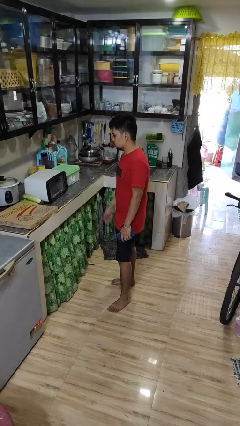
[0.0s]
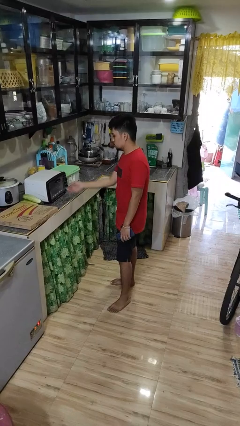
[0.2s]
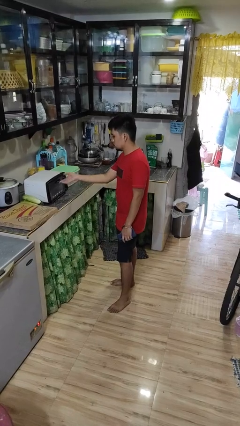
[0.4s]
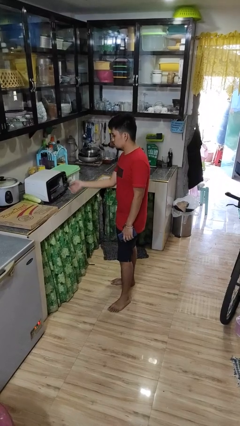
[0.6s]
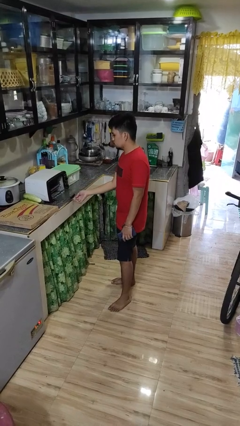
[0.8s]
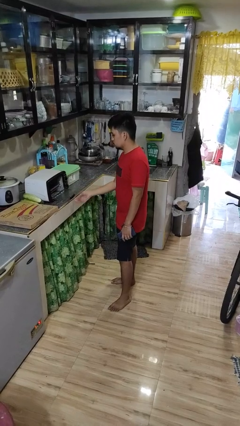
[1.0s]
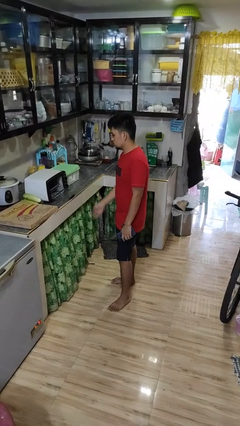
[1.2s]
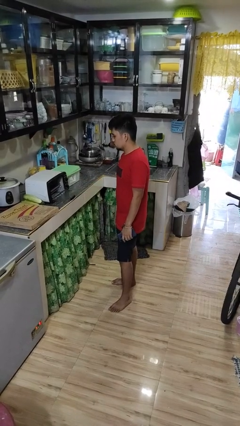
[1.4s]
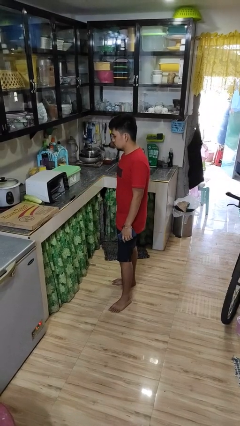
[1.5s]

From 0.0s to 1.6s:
person opens microwave

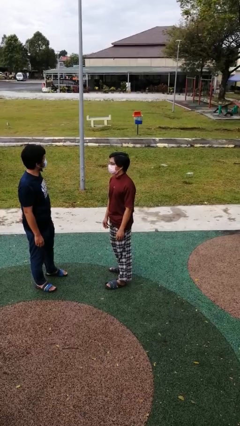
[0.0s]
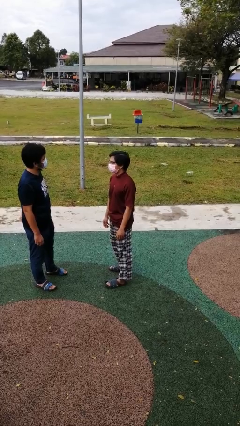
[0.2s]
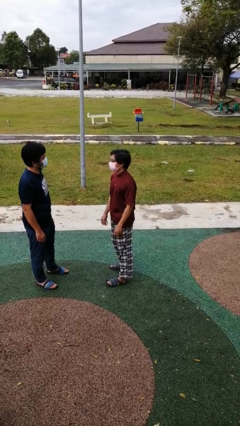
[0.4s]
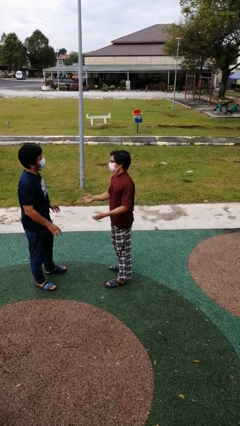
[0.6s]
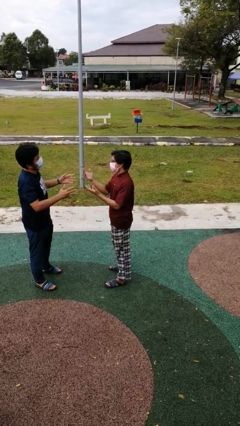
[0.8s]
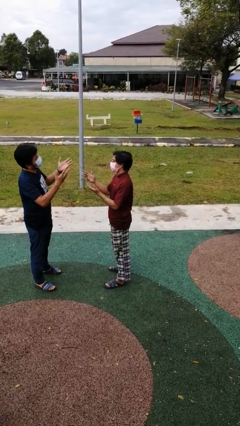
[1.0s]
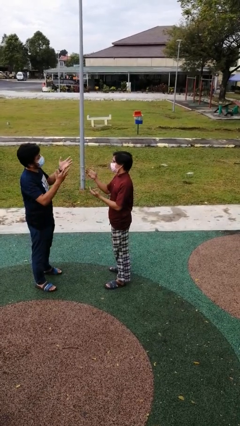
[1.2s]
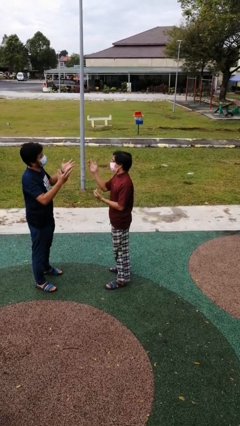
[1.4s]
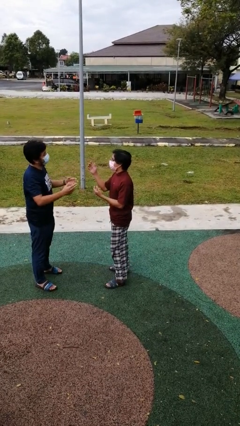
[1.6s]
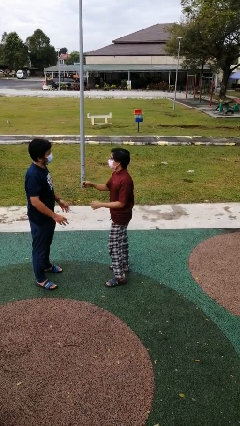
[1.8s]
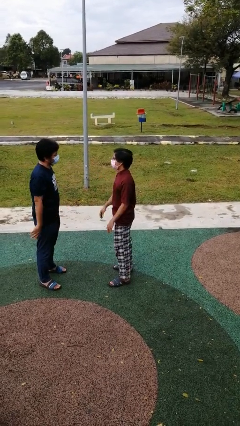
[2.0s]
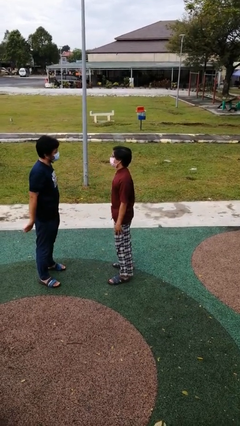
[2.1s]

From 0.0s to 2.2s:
person talks to person

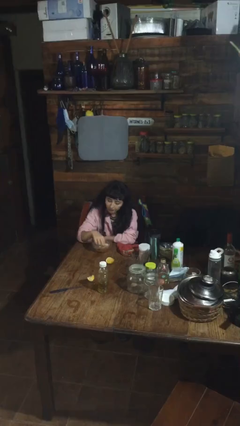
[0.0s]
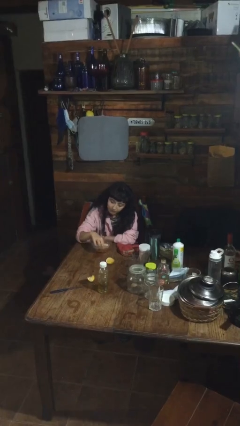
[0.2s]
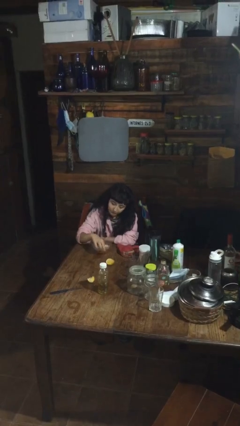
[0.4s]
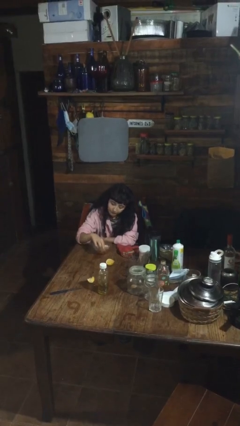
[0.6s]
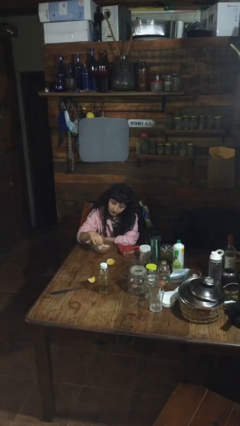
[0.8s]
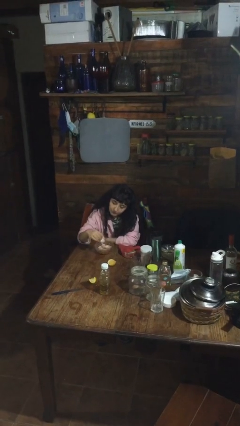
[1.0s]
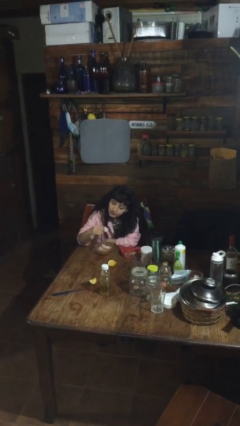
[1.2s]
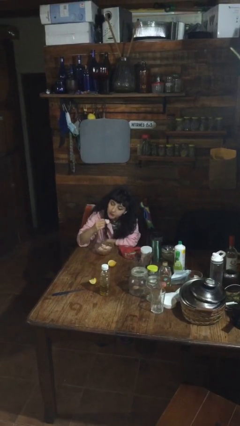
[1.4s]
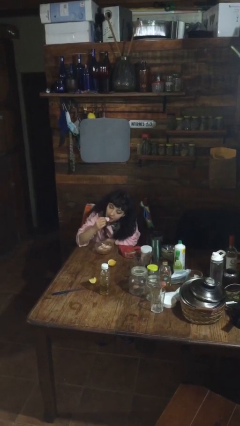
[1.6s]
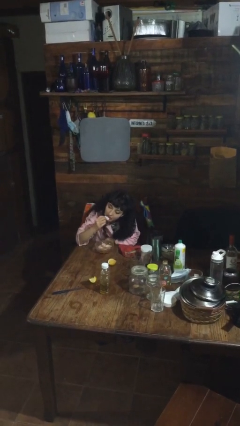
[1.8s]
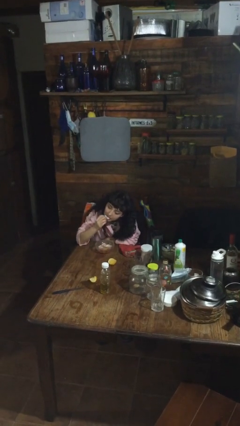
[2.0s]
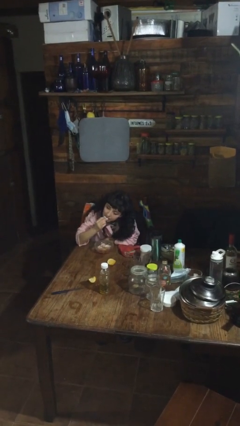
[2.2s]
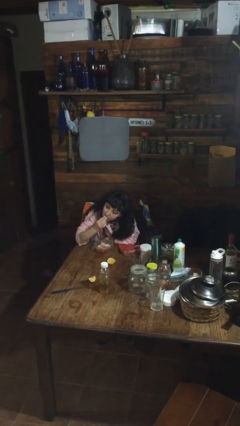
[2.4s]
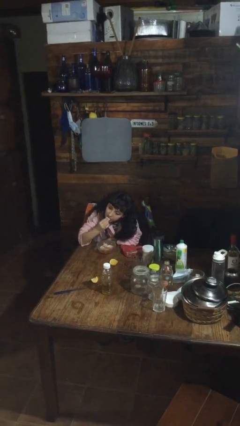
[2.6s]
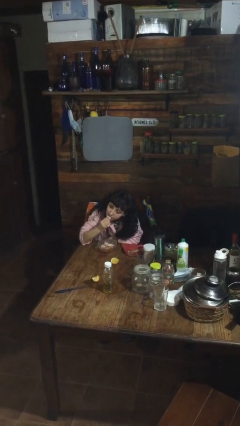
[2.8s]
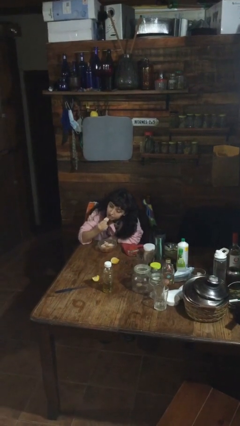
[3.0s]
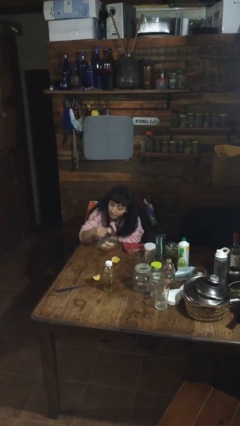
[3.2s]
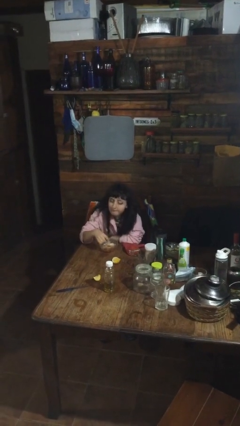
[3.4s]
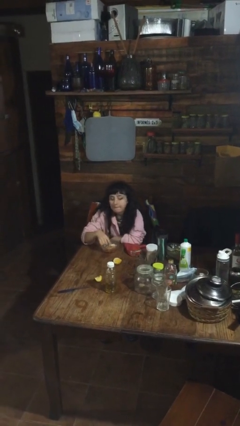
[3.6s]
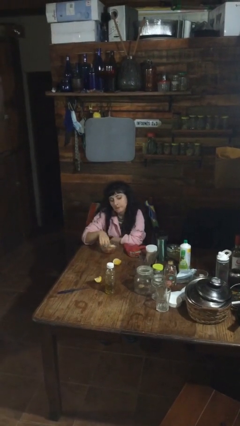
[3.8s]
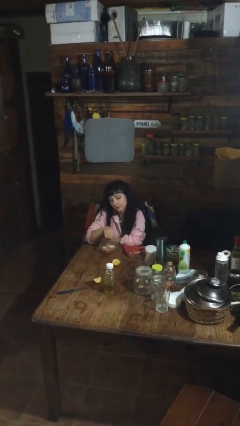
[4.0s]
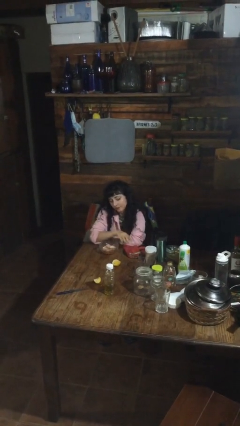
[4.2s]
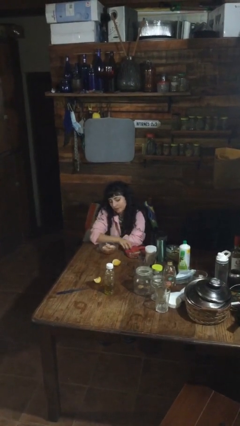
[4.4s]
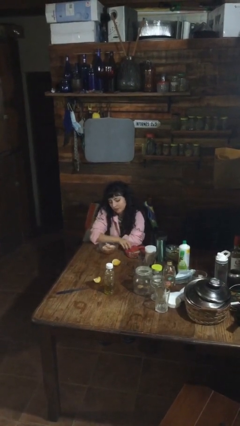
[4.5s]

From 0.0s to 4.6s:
person eats with hands

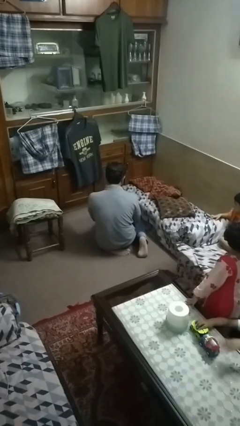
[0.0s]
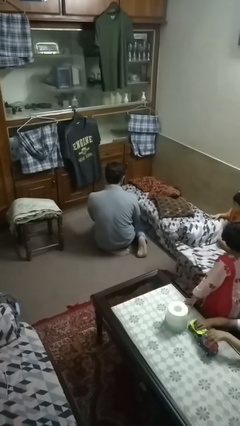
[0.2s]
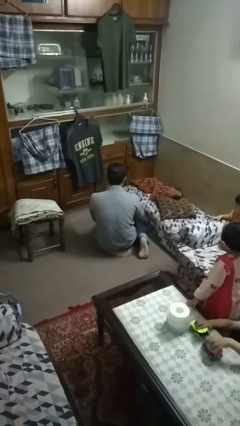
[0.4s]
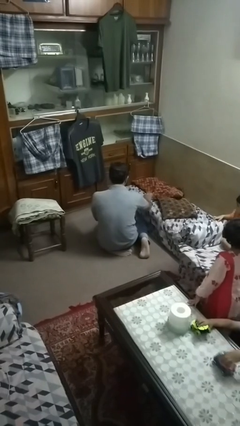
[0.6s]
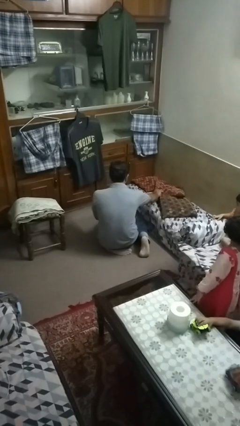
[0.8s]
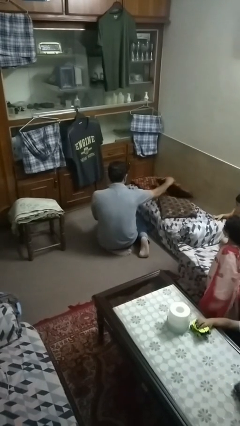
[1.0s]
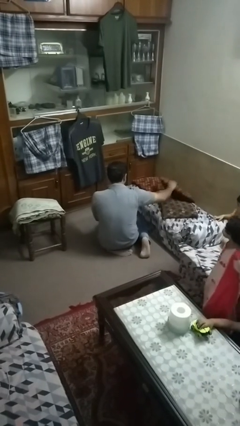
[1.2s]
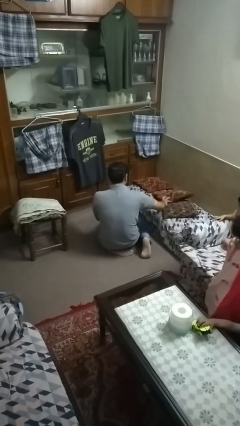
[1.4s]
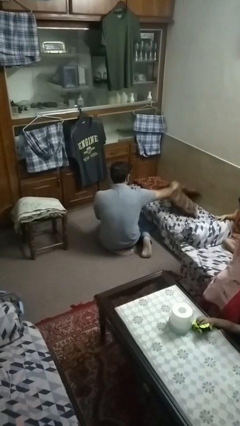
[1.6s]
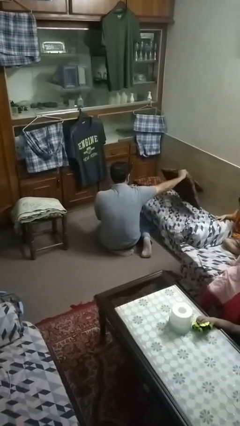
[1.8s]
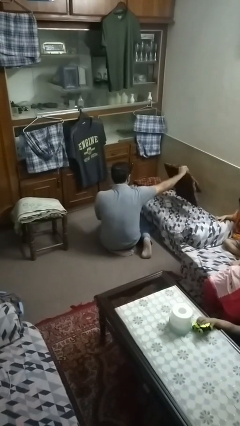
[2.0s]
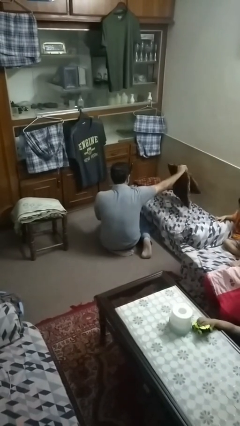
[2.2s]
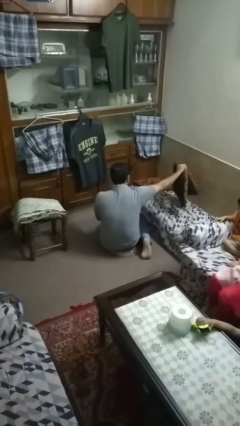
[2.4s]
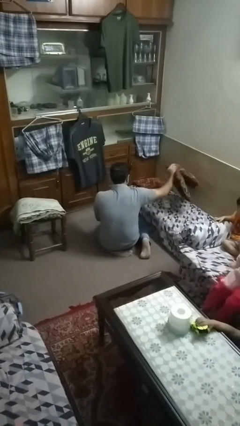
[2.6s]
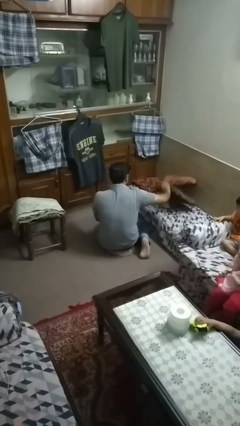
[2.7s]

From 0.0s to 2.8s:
person searches in couch

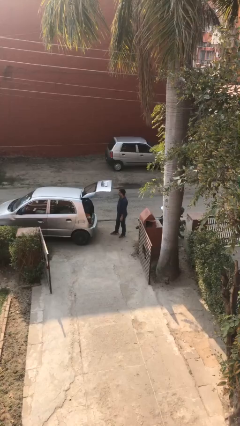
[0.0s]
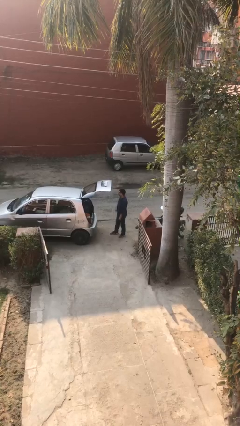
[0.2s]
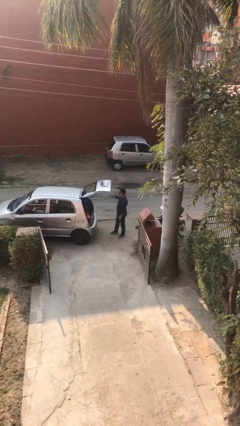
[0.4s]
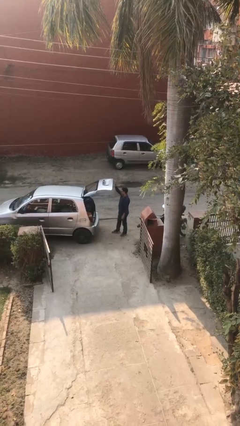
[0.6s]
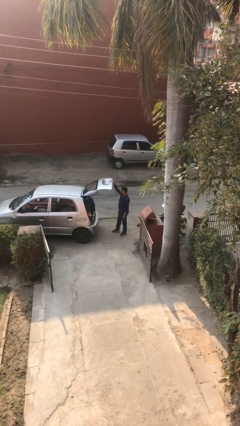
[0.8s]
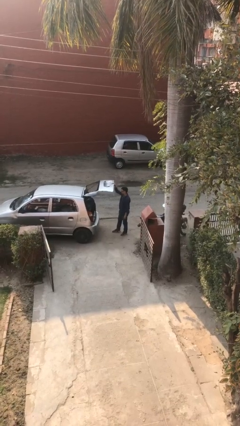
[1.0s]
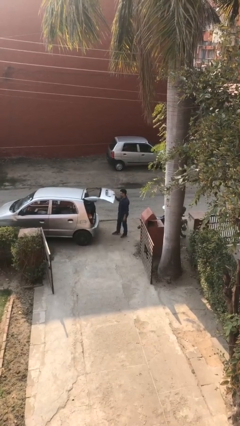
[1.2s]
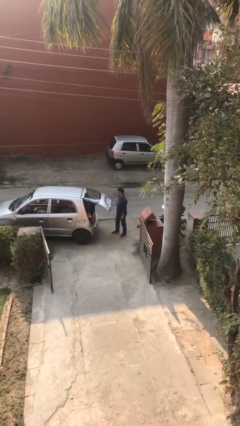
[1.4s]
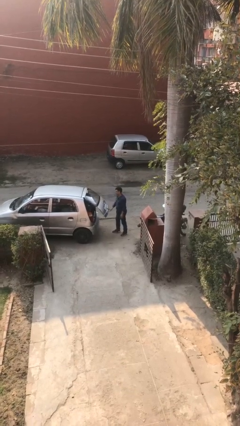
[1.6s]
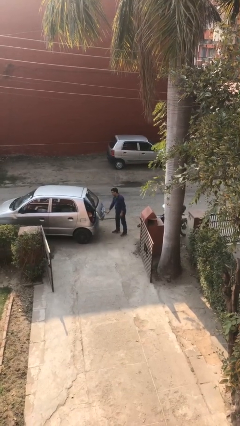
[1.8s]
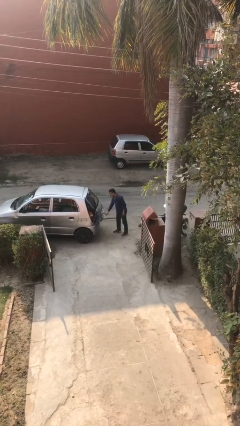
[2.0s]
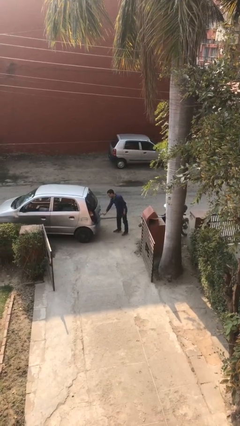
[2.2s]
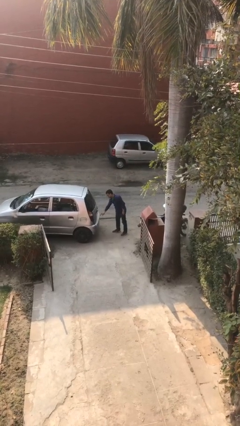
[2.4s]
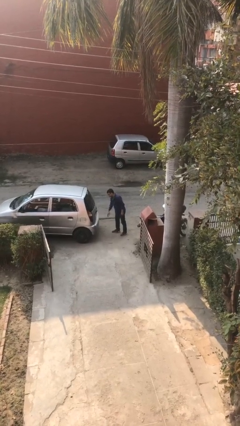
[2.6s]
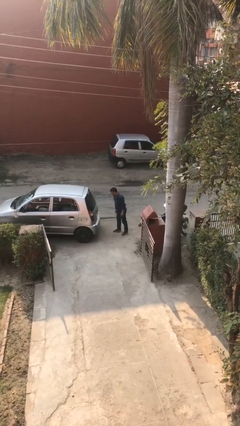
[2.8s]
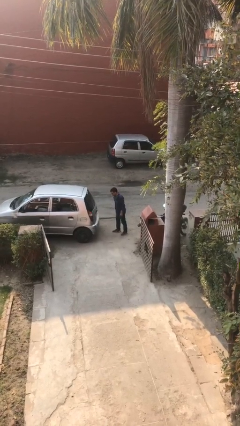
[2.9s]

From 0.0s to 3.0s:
person closes car trunk

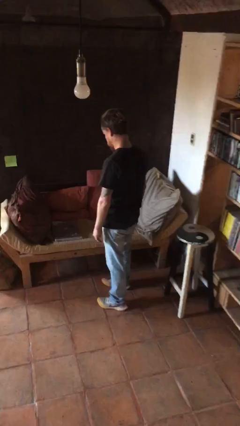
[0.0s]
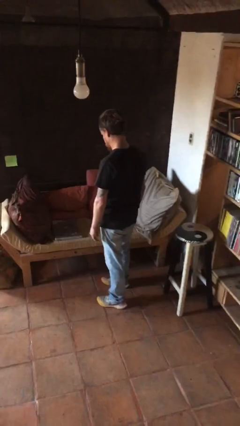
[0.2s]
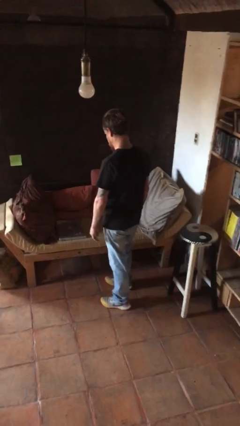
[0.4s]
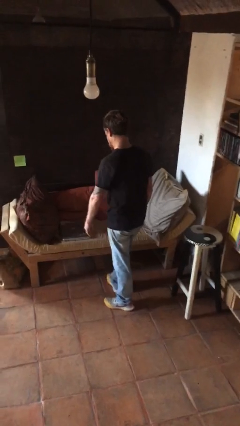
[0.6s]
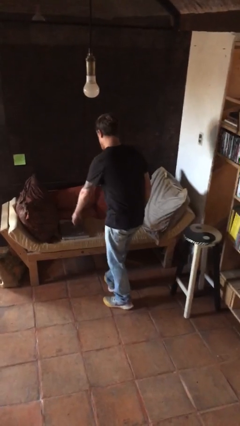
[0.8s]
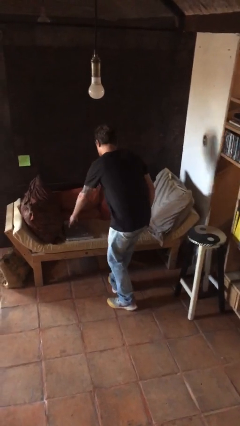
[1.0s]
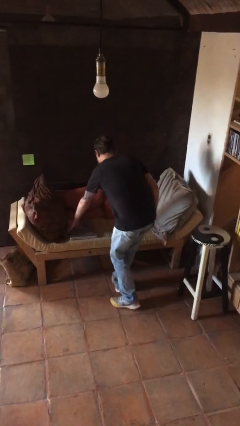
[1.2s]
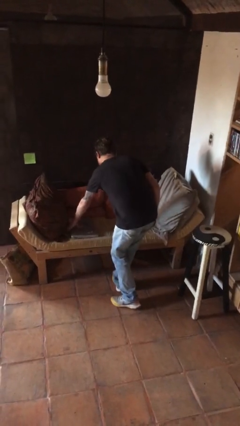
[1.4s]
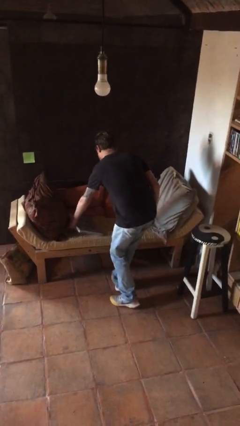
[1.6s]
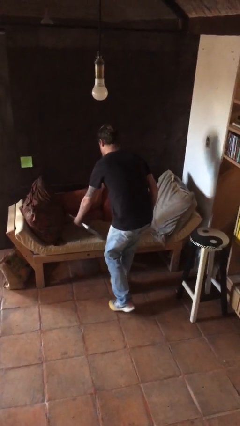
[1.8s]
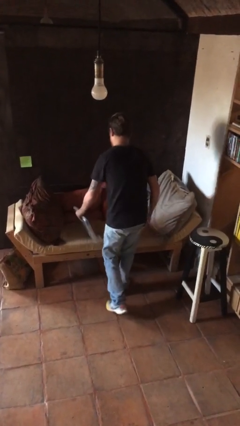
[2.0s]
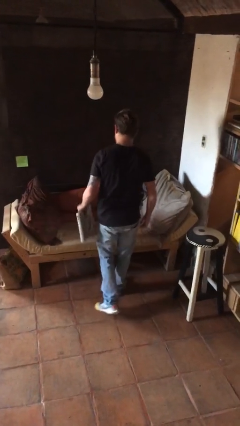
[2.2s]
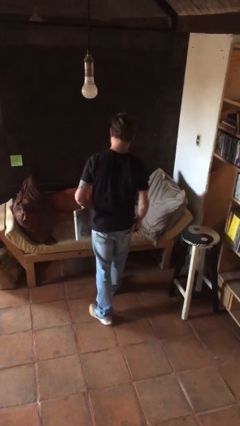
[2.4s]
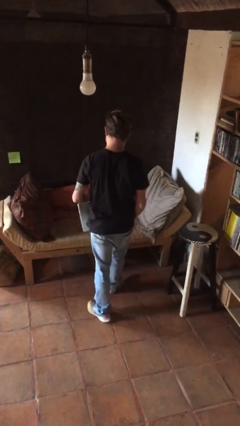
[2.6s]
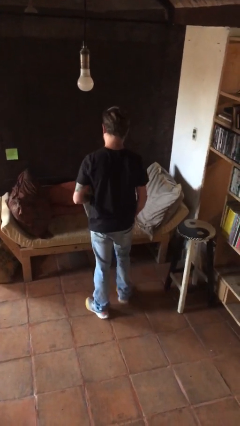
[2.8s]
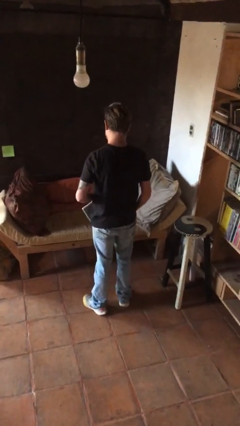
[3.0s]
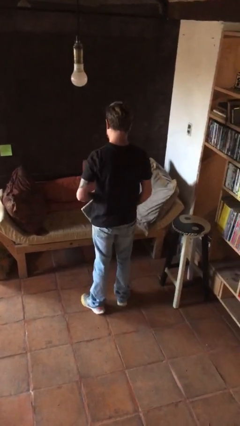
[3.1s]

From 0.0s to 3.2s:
person picks up object from couch
